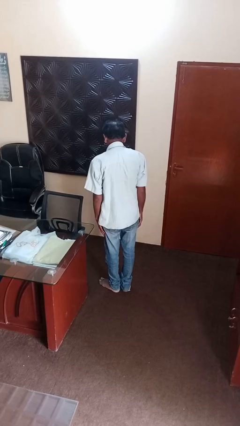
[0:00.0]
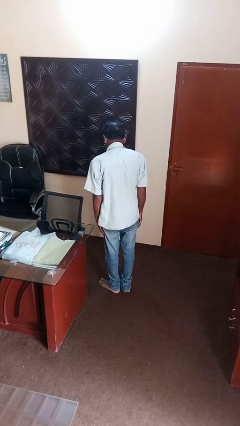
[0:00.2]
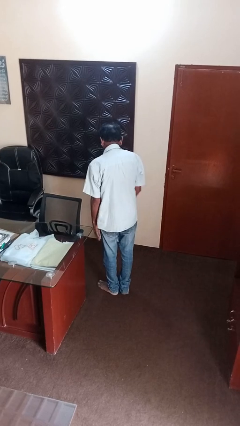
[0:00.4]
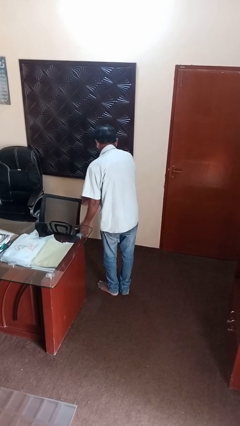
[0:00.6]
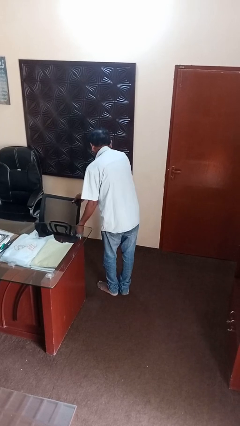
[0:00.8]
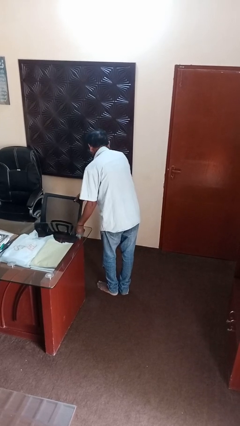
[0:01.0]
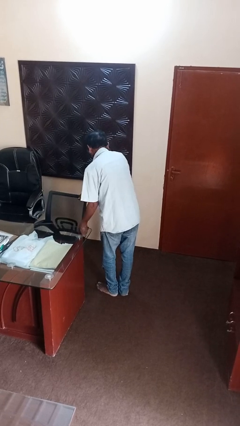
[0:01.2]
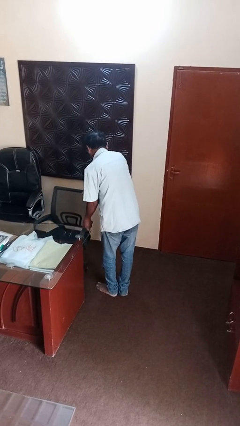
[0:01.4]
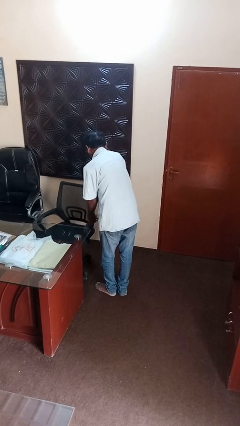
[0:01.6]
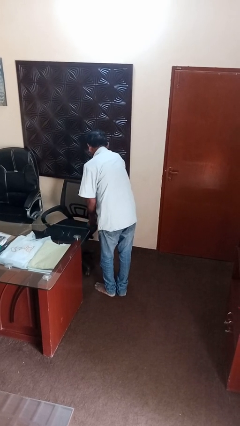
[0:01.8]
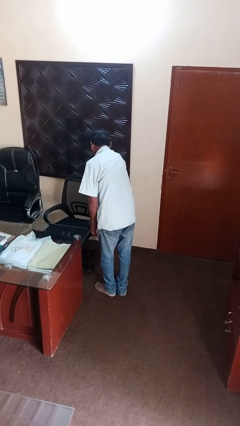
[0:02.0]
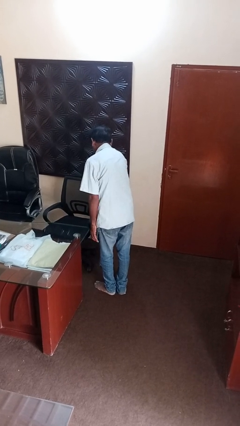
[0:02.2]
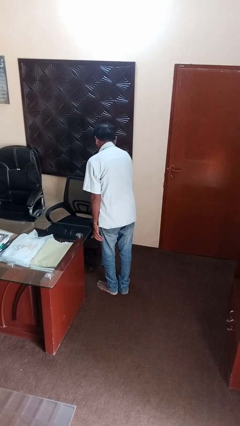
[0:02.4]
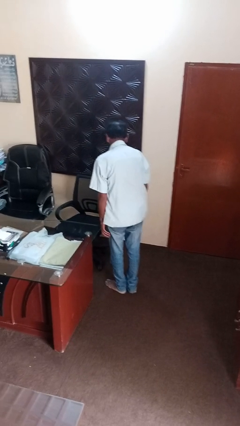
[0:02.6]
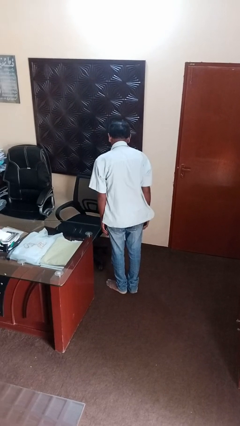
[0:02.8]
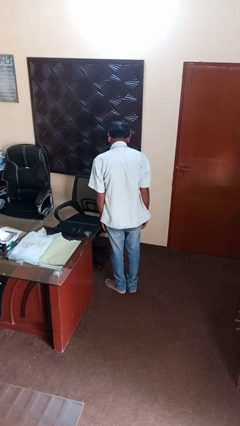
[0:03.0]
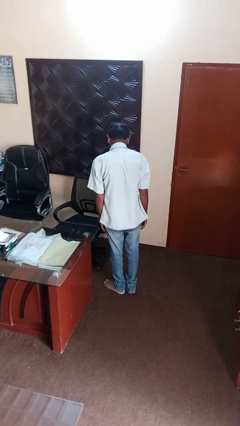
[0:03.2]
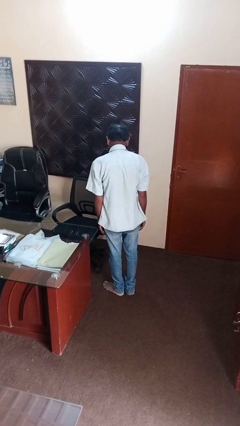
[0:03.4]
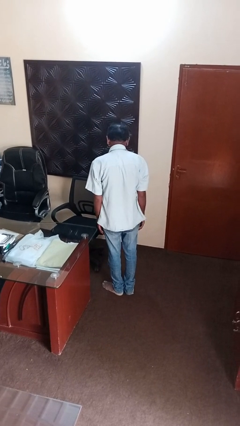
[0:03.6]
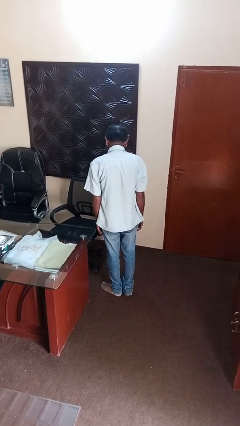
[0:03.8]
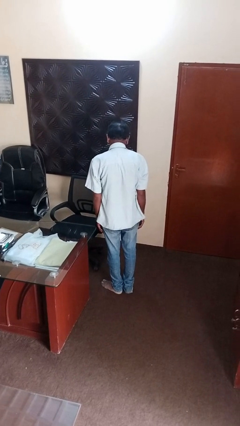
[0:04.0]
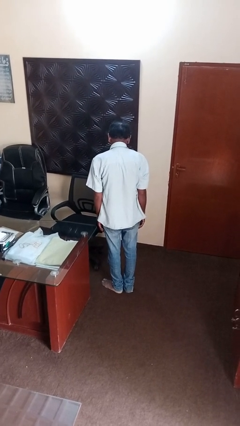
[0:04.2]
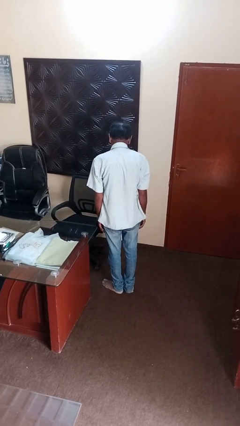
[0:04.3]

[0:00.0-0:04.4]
person pulls out chair

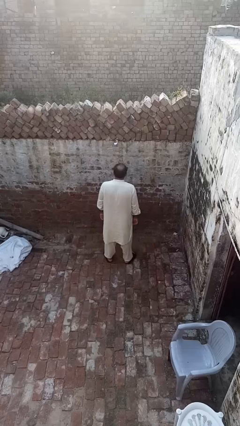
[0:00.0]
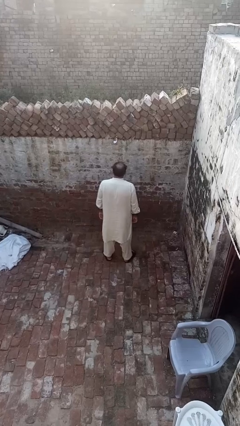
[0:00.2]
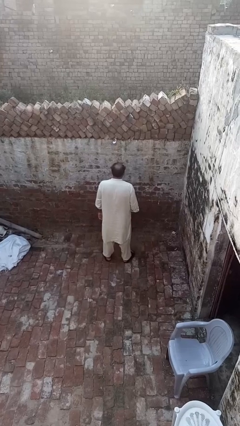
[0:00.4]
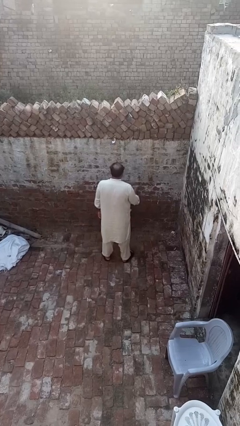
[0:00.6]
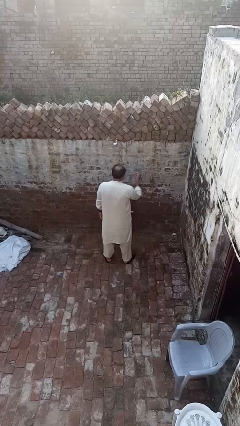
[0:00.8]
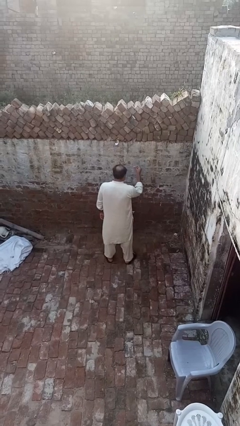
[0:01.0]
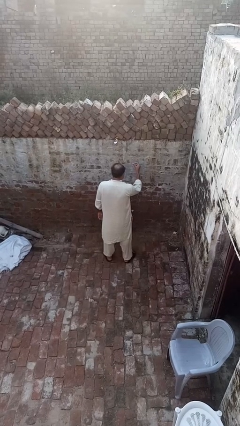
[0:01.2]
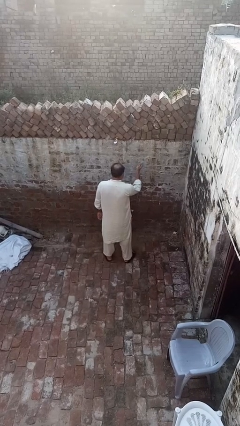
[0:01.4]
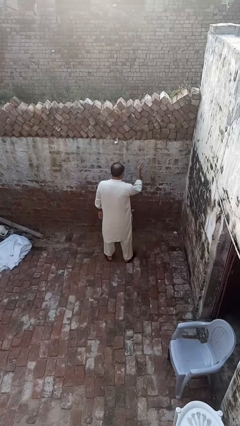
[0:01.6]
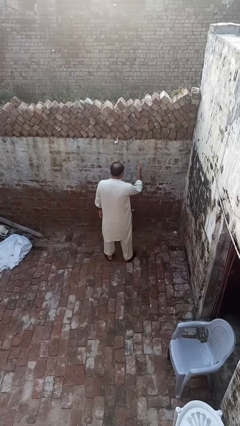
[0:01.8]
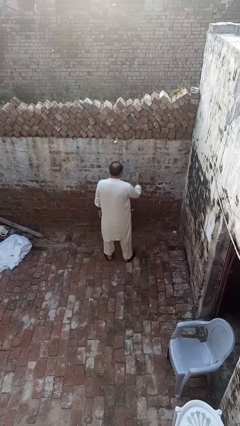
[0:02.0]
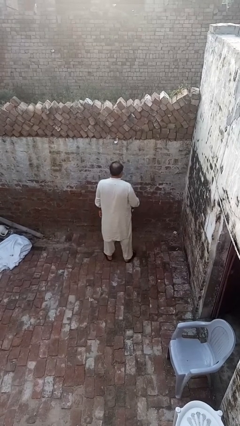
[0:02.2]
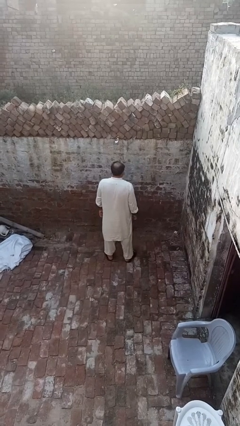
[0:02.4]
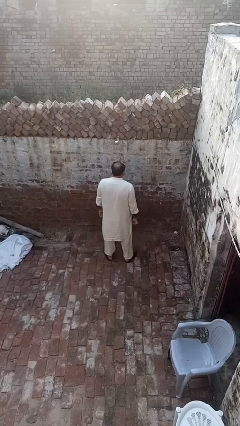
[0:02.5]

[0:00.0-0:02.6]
person snaps fingers

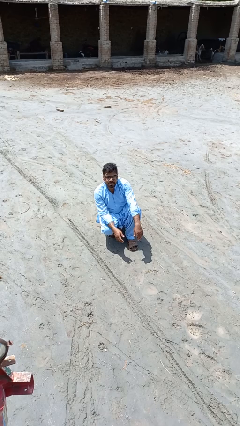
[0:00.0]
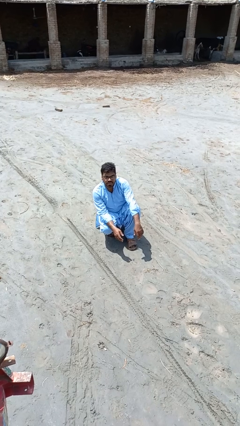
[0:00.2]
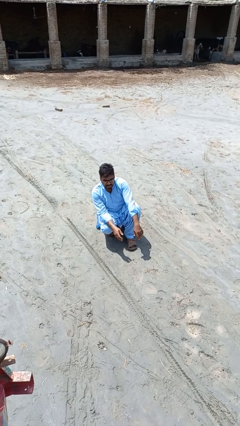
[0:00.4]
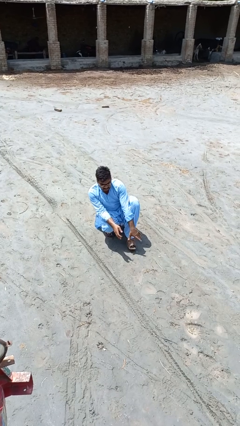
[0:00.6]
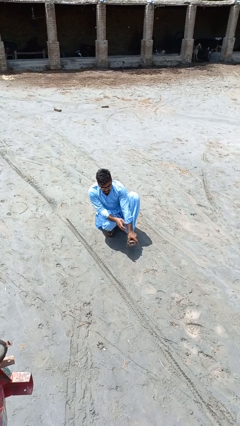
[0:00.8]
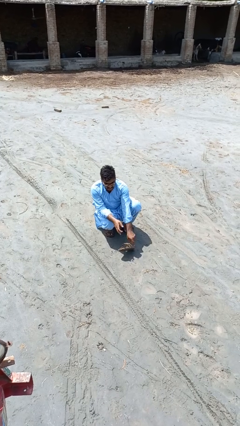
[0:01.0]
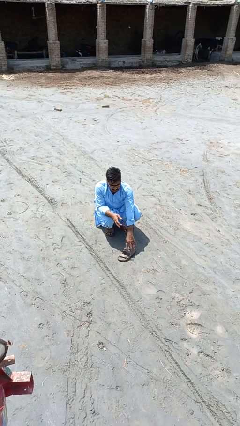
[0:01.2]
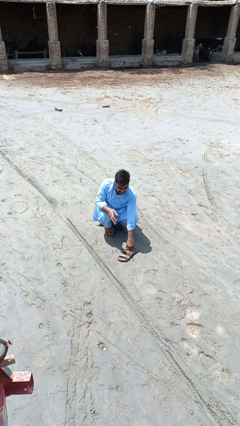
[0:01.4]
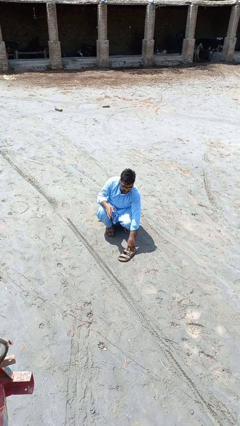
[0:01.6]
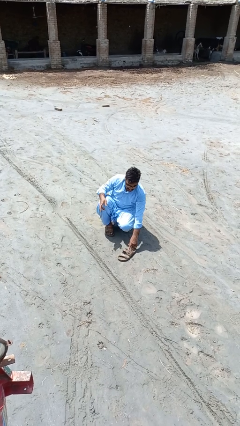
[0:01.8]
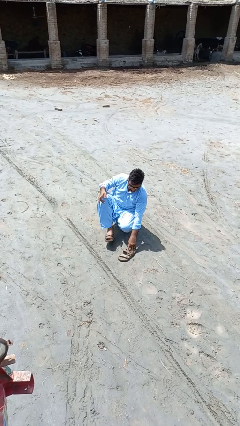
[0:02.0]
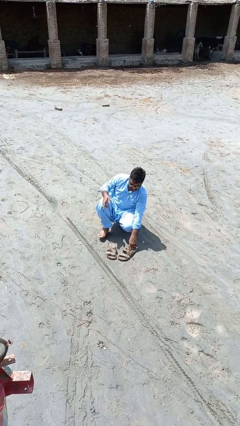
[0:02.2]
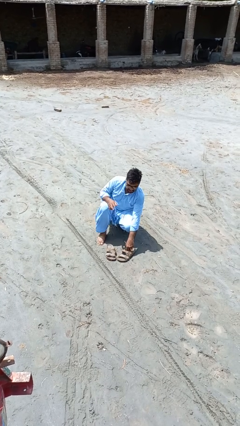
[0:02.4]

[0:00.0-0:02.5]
person takes off shoes

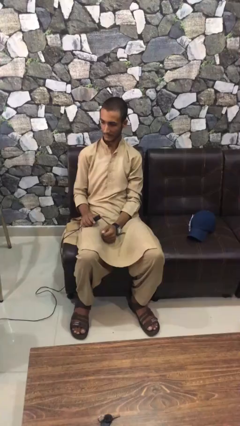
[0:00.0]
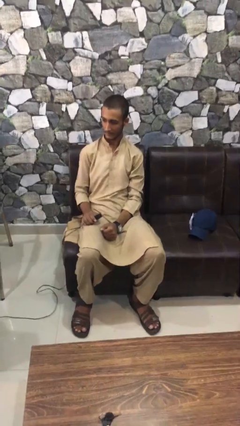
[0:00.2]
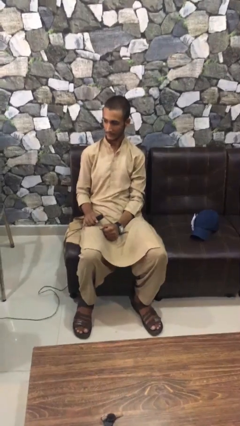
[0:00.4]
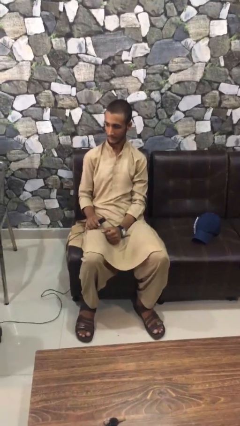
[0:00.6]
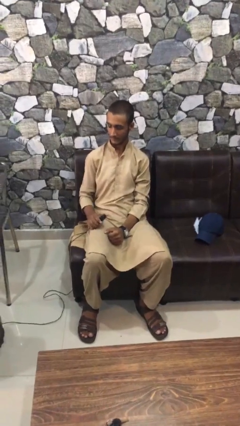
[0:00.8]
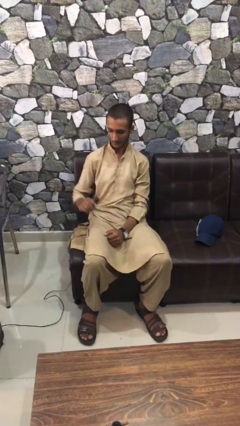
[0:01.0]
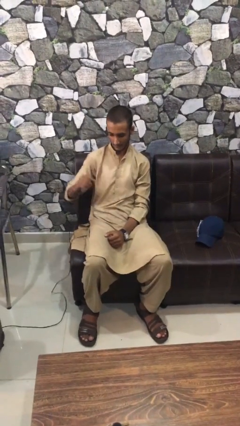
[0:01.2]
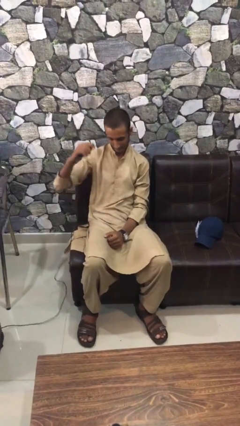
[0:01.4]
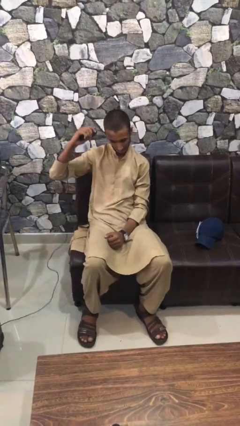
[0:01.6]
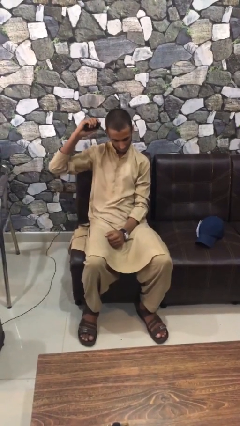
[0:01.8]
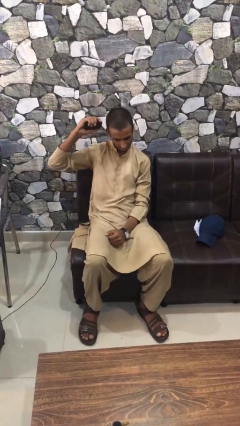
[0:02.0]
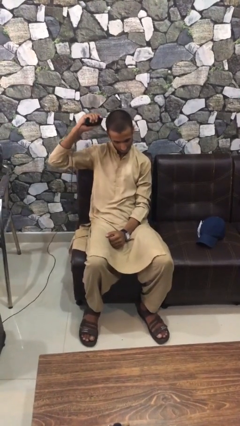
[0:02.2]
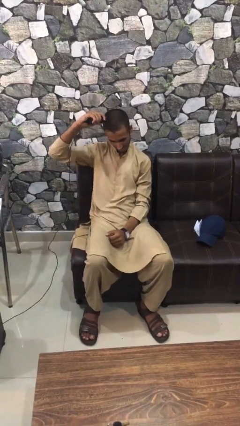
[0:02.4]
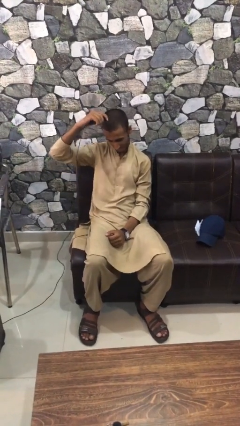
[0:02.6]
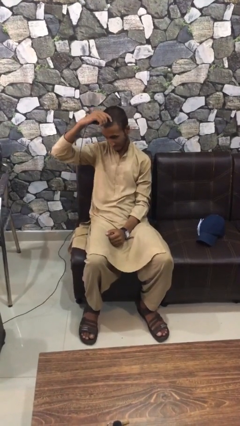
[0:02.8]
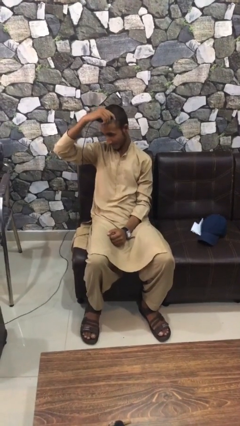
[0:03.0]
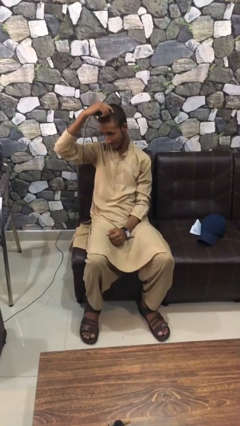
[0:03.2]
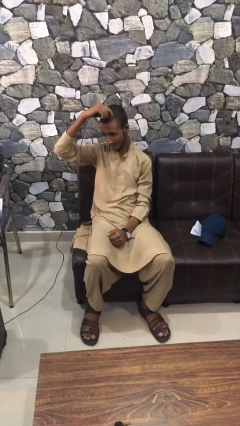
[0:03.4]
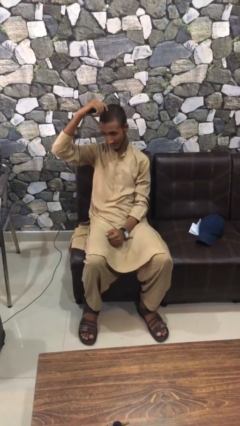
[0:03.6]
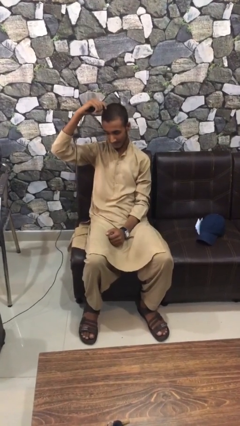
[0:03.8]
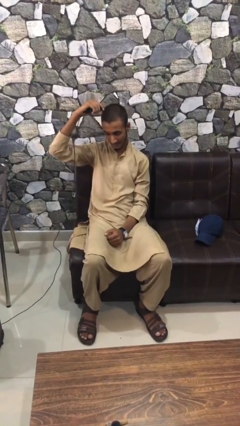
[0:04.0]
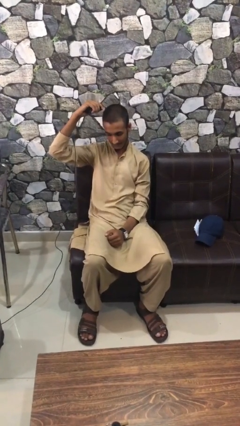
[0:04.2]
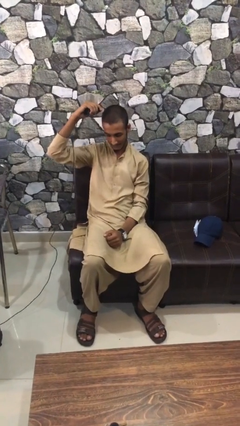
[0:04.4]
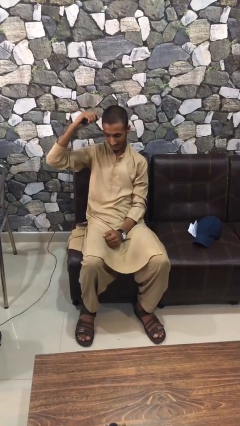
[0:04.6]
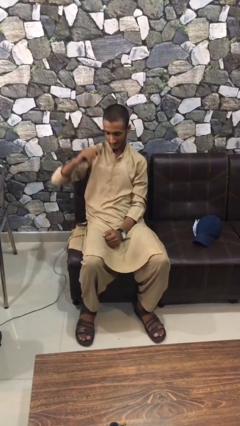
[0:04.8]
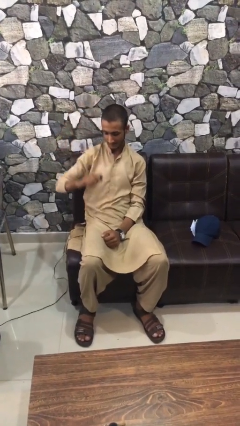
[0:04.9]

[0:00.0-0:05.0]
person dries hair with hairdryer

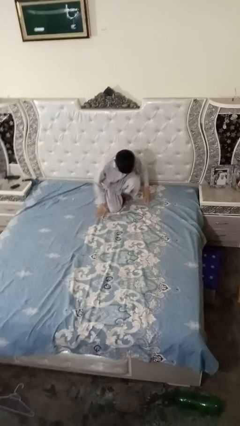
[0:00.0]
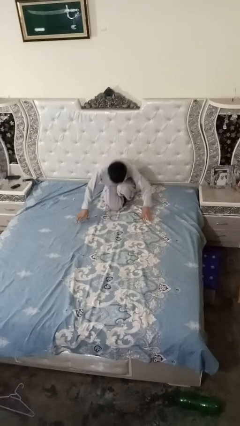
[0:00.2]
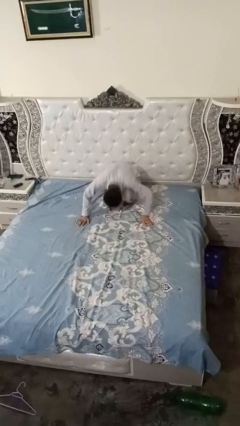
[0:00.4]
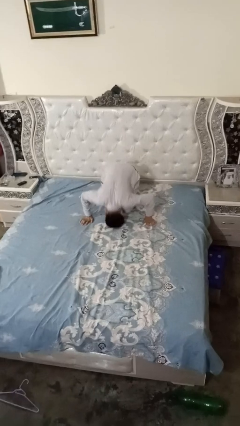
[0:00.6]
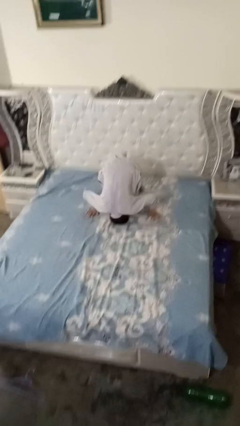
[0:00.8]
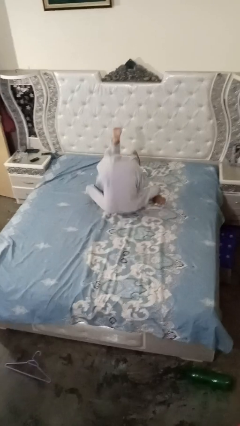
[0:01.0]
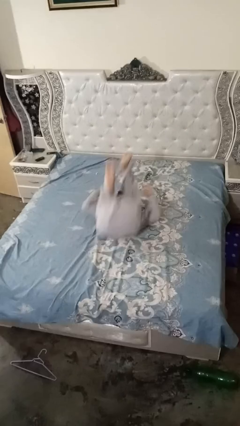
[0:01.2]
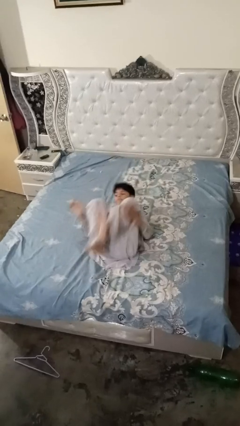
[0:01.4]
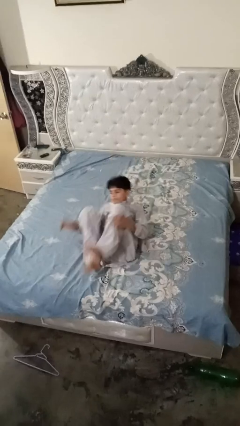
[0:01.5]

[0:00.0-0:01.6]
person somersaults

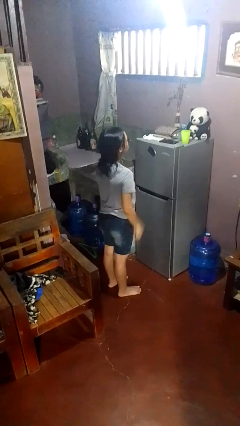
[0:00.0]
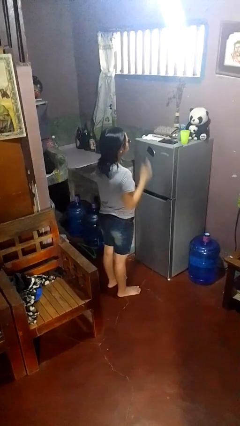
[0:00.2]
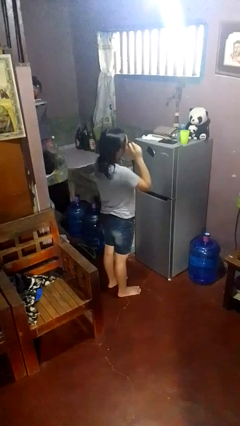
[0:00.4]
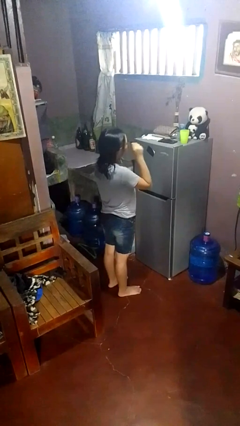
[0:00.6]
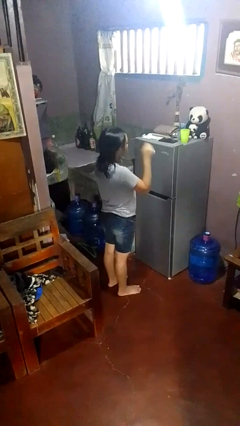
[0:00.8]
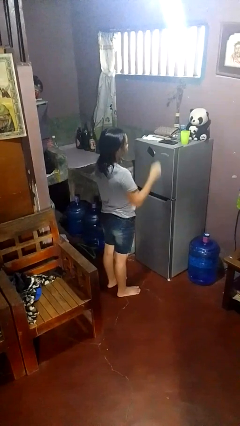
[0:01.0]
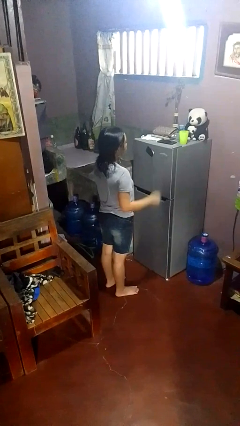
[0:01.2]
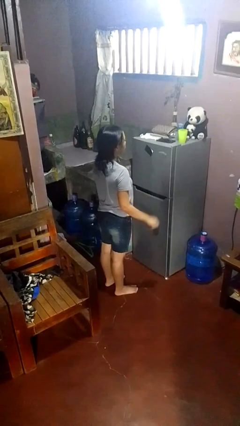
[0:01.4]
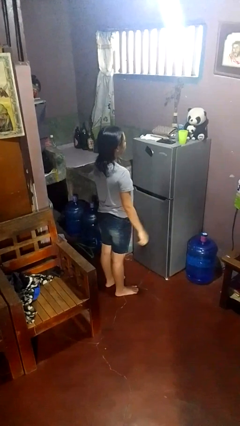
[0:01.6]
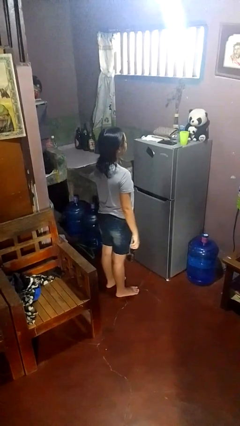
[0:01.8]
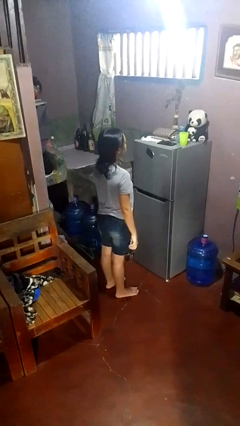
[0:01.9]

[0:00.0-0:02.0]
person takes off sunglasses
